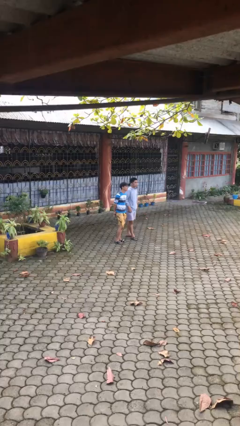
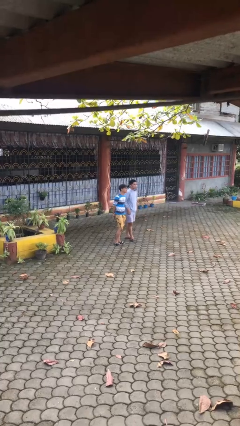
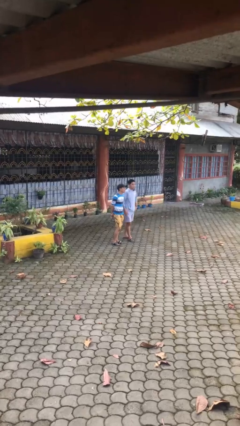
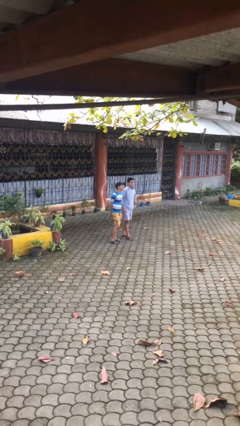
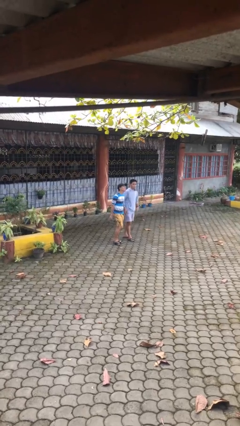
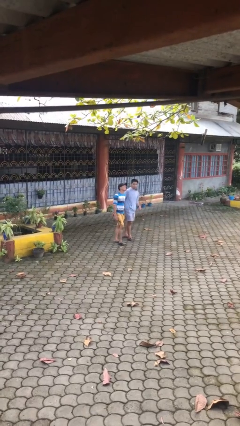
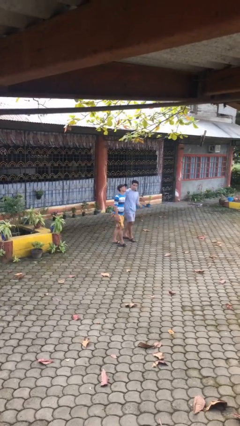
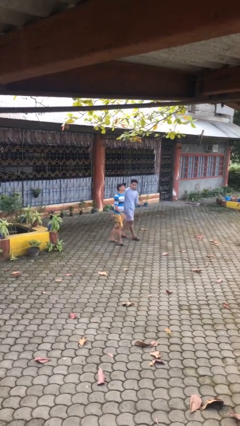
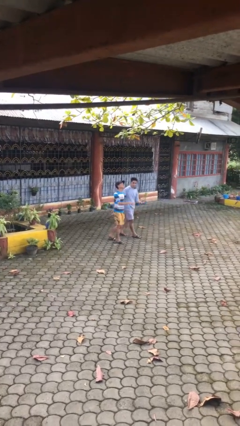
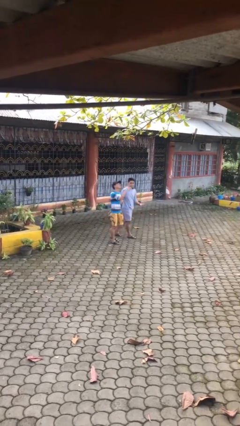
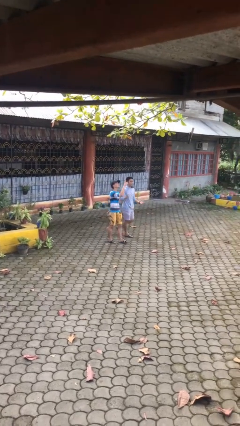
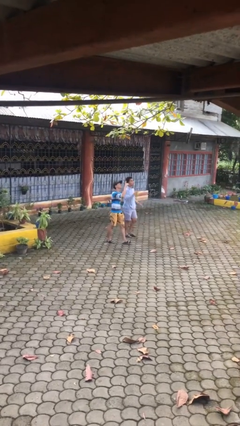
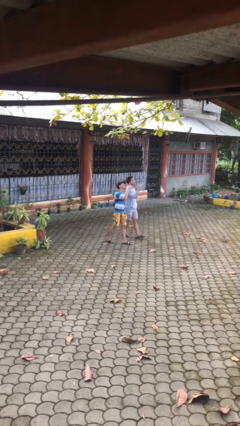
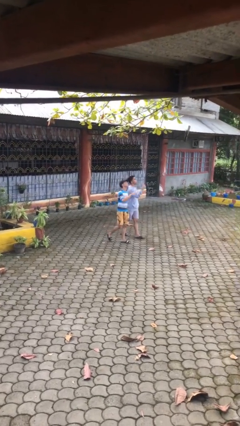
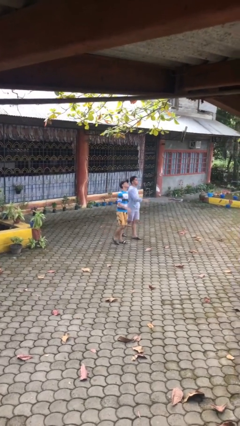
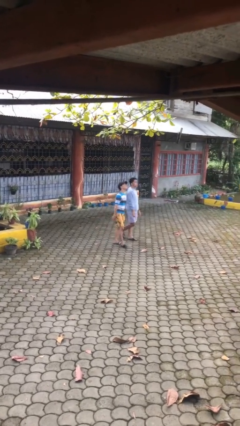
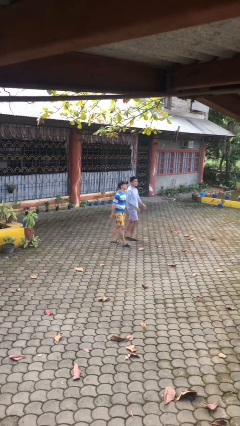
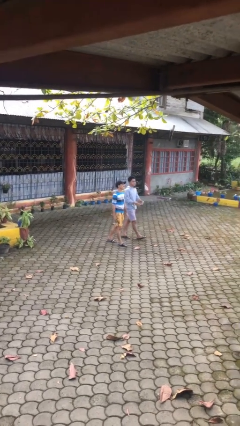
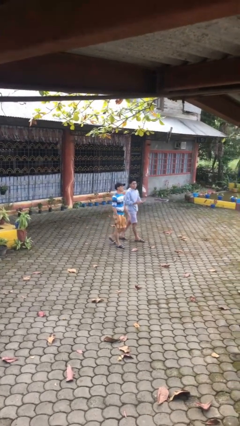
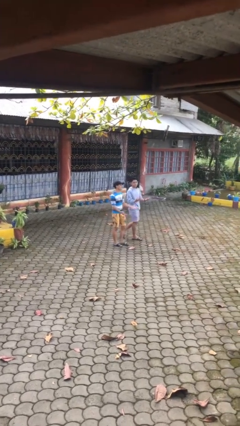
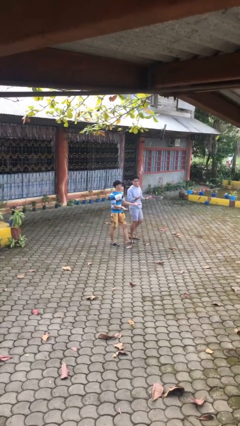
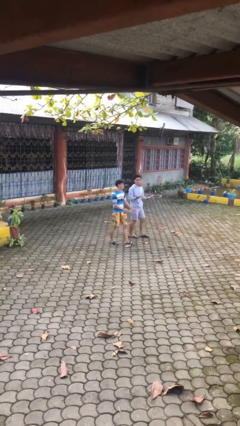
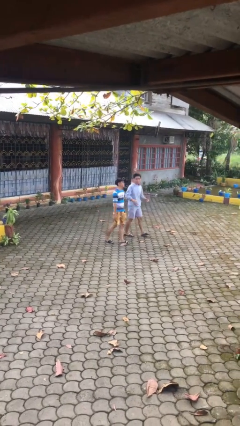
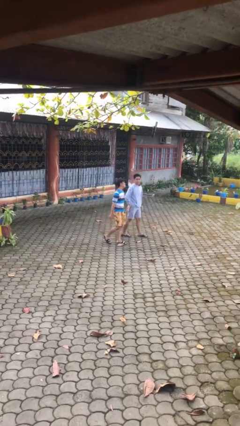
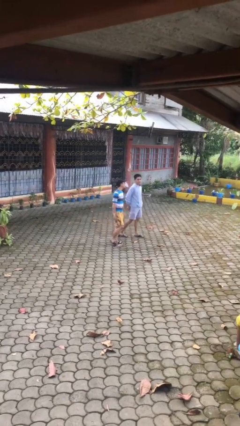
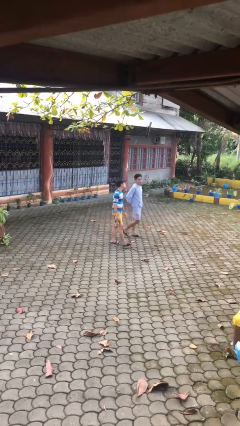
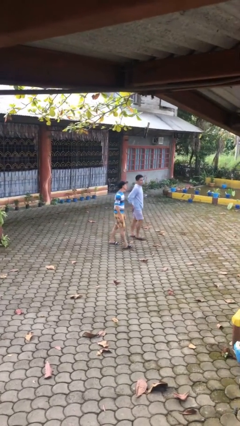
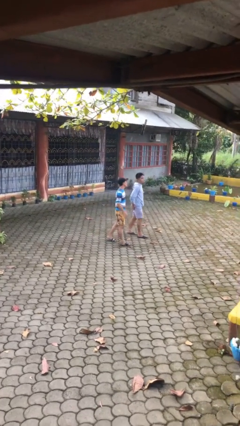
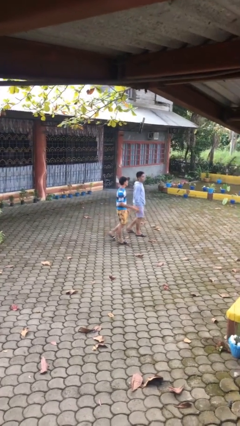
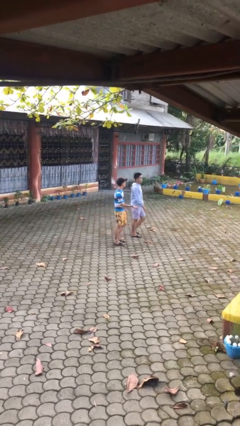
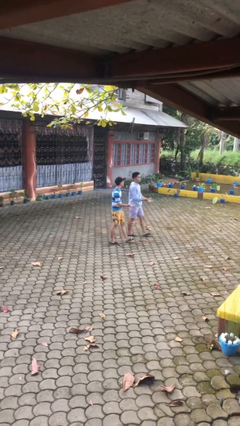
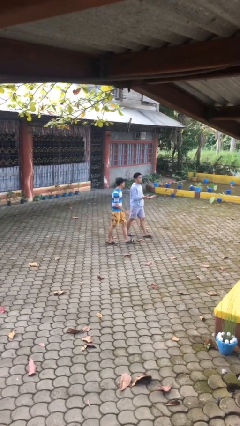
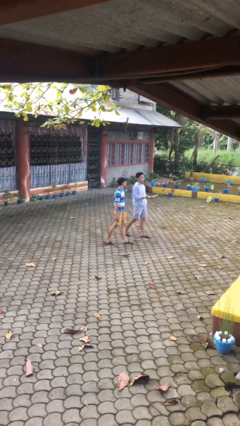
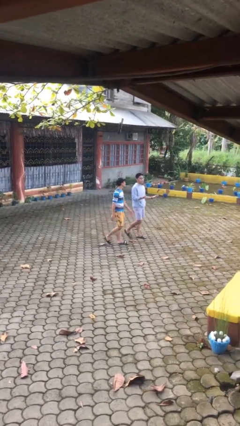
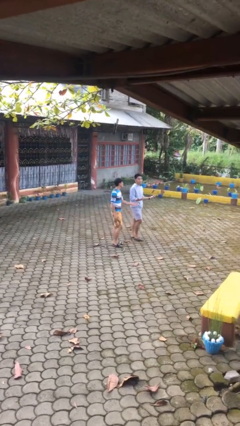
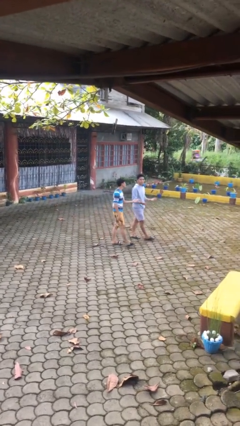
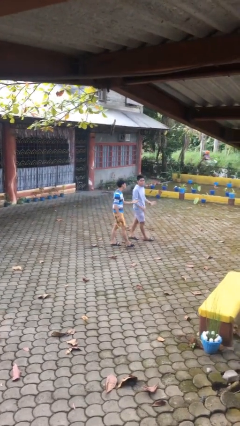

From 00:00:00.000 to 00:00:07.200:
person talks to person

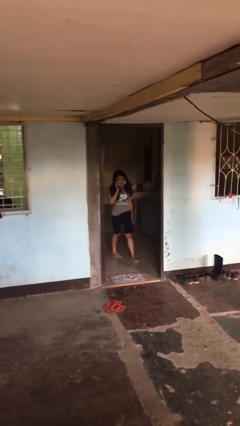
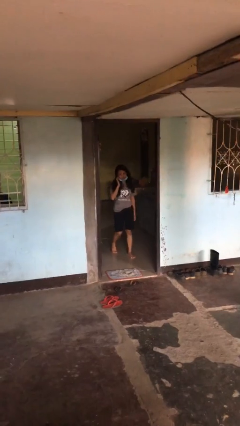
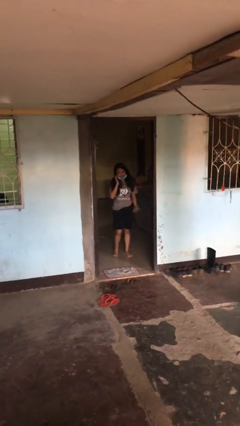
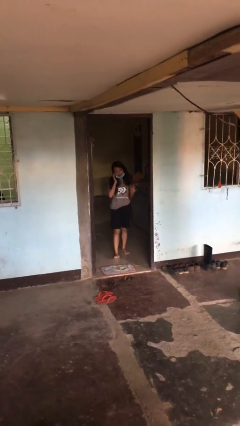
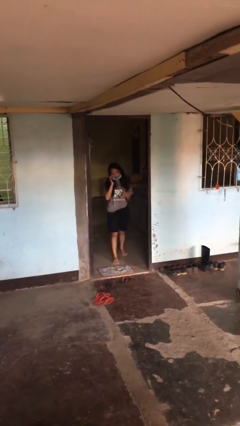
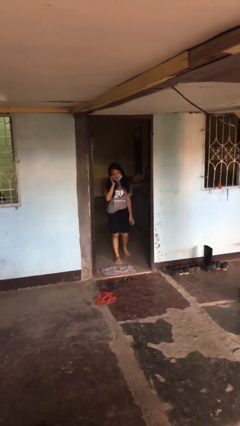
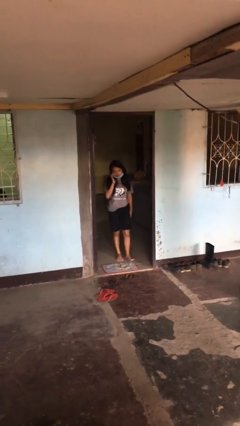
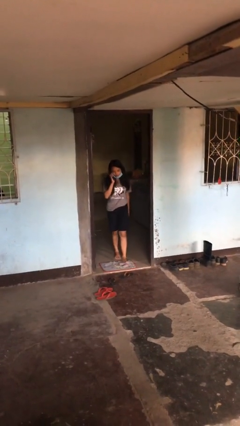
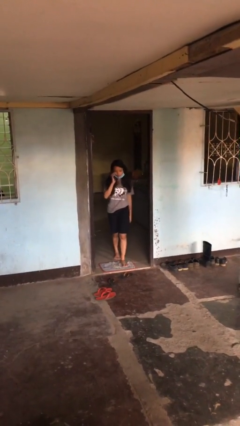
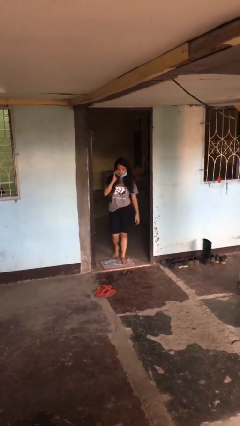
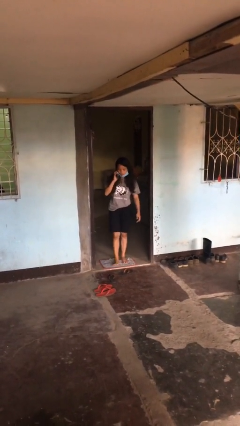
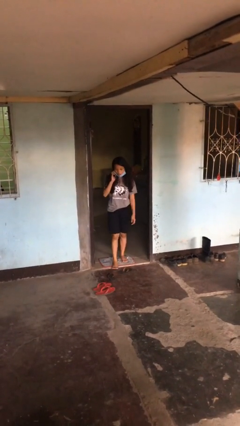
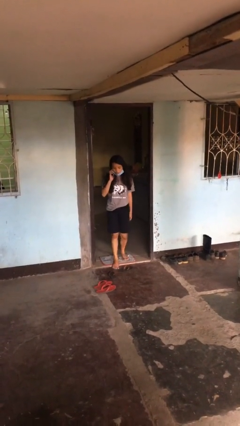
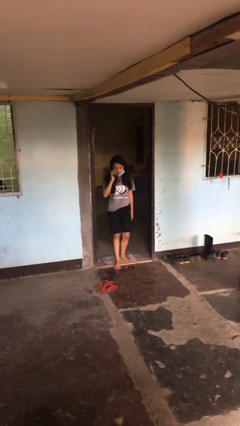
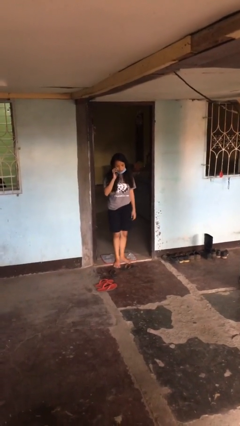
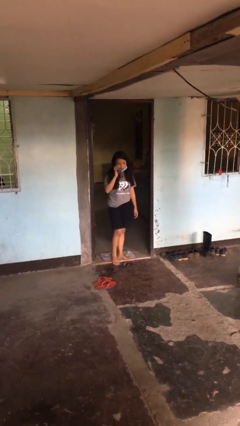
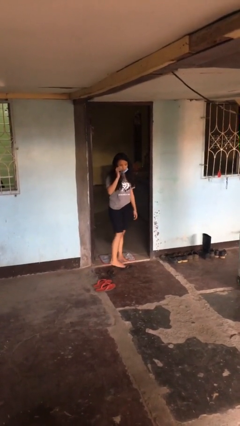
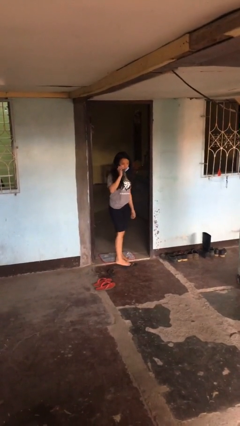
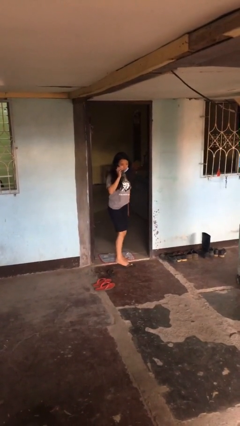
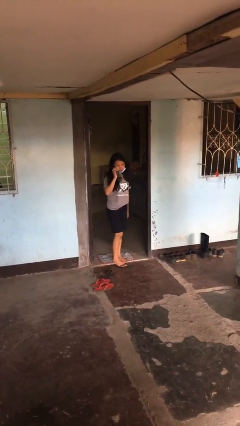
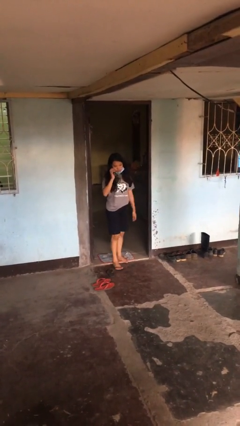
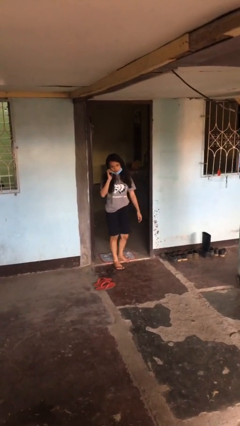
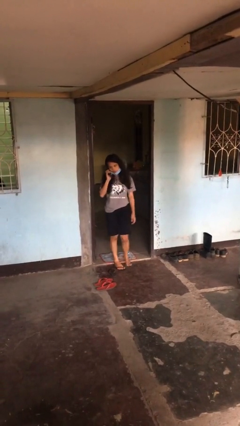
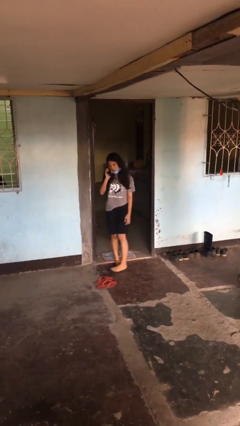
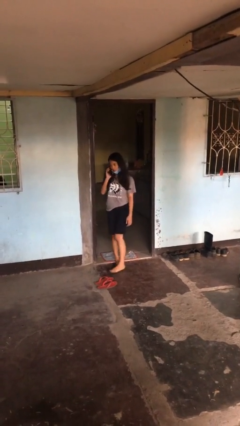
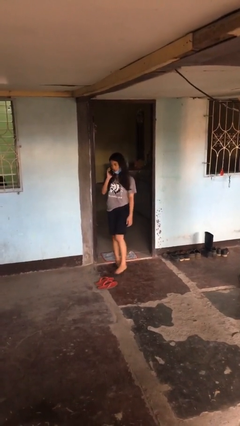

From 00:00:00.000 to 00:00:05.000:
person enters scene through structure

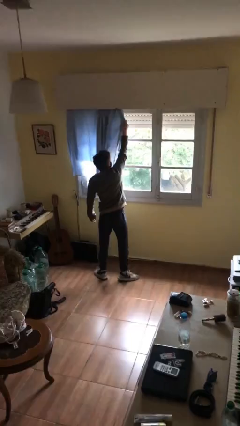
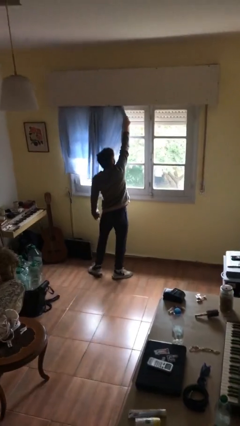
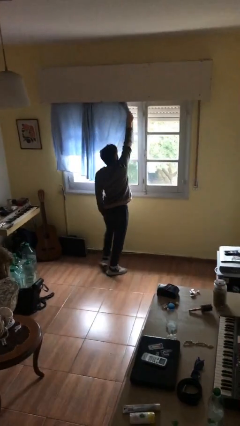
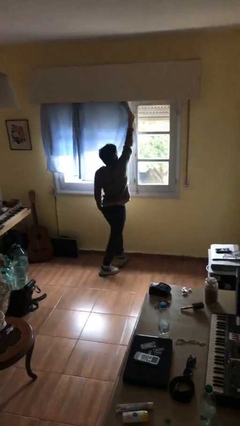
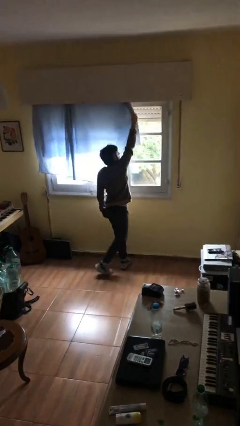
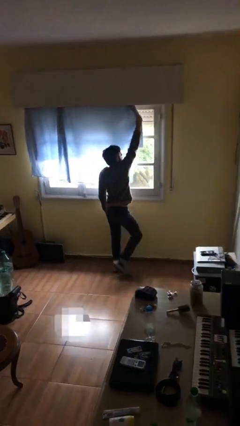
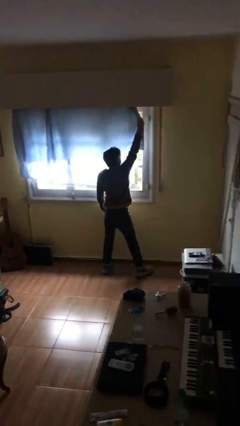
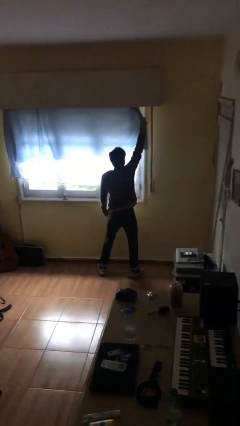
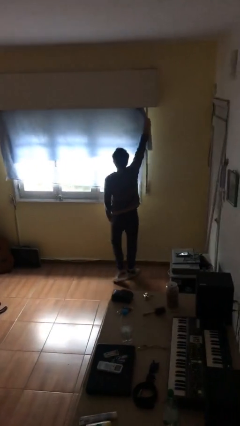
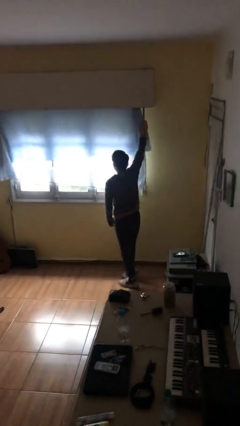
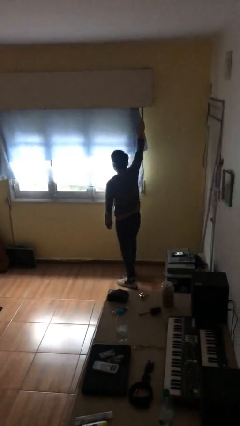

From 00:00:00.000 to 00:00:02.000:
person closes curtains

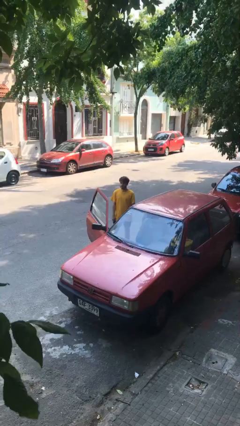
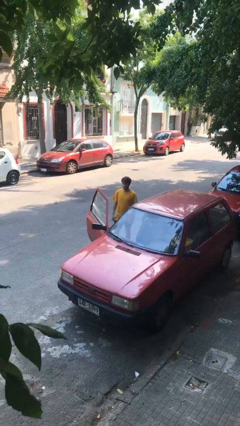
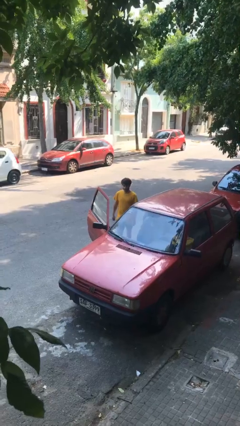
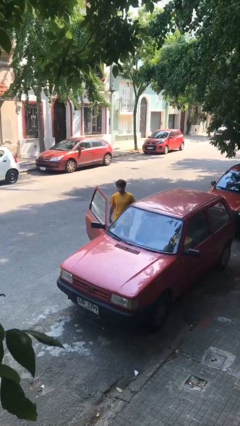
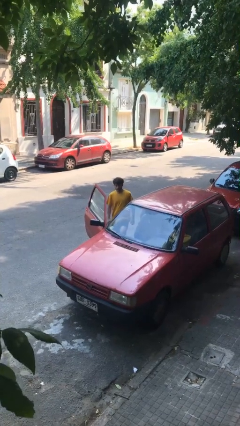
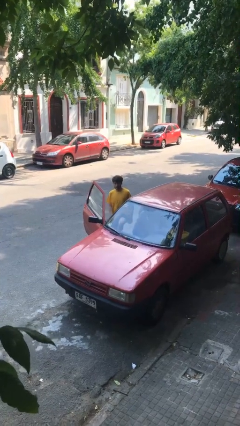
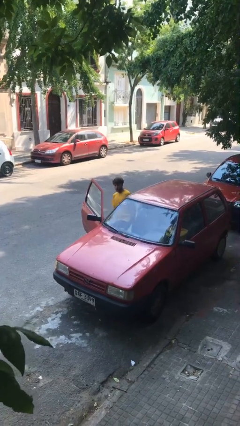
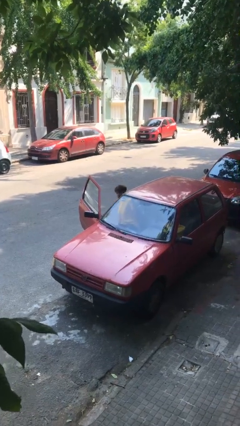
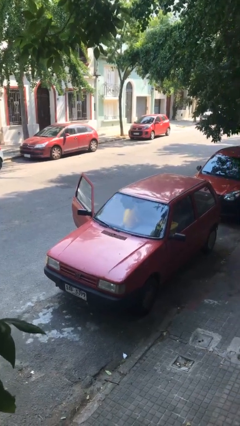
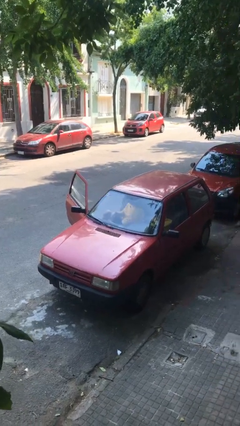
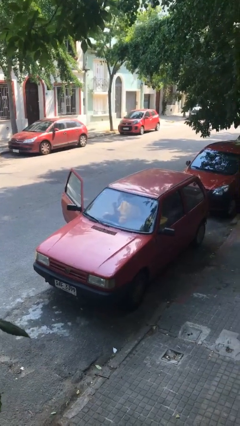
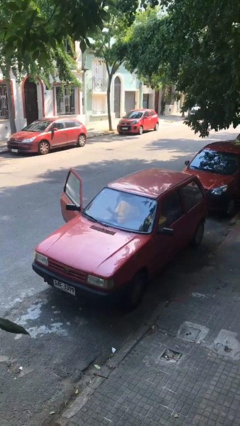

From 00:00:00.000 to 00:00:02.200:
person enters car

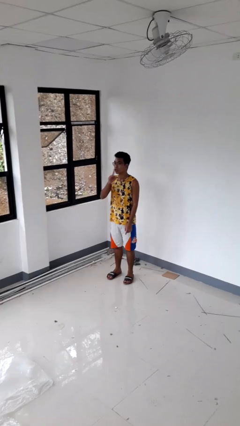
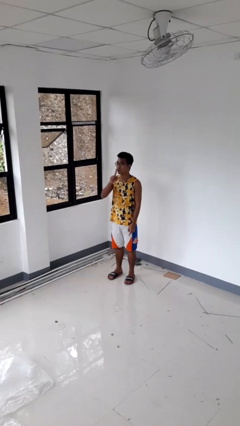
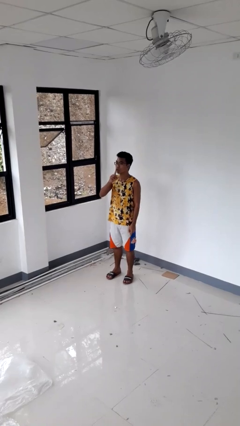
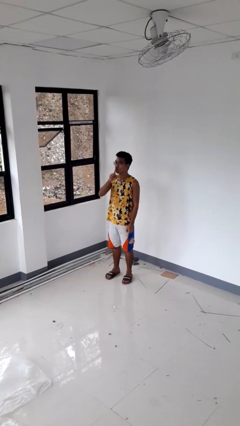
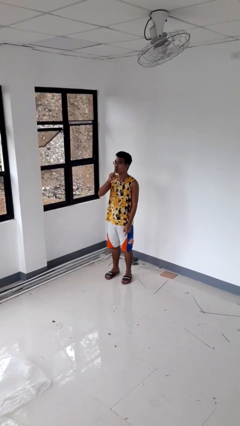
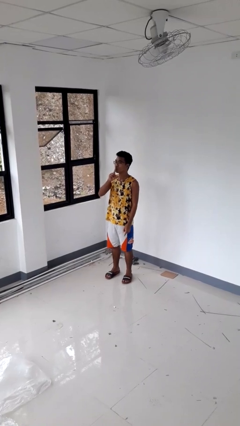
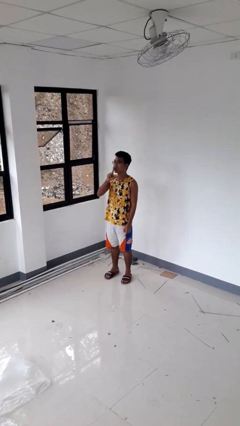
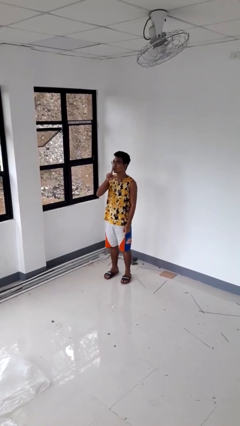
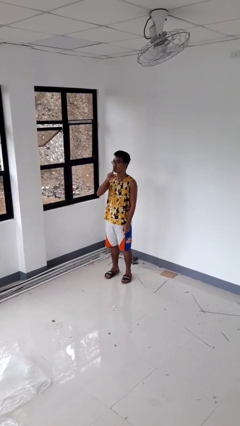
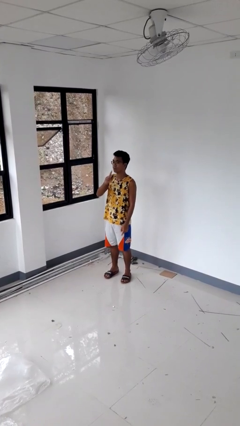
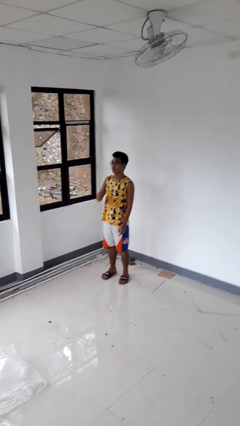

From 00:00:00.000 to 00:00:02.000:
person gestures be quiet
